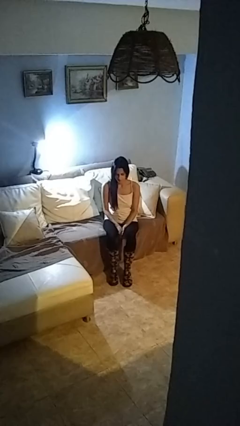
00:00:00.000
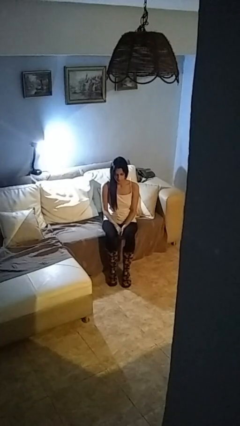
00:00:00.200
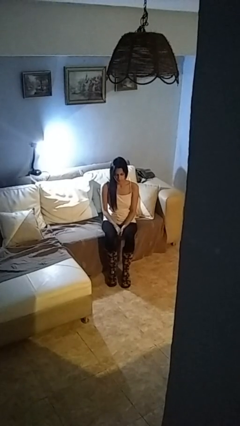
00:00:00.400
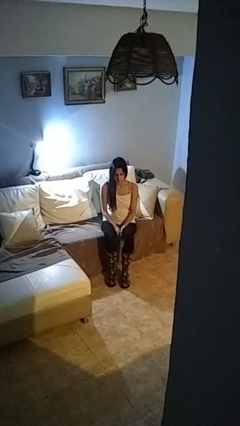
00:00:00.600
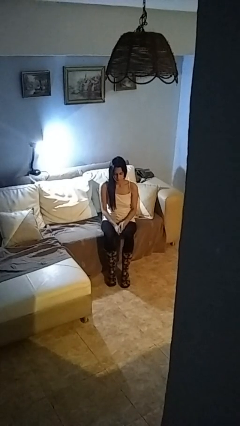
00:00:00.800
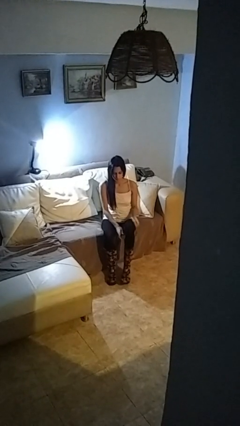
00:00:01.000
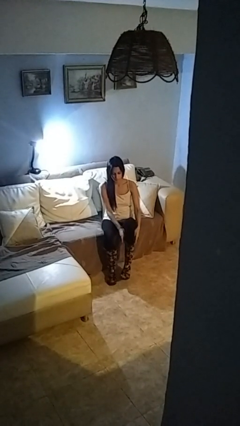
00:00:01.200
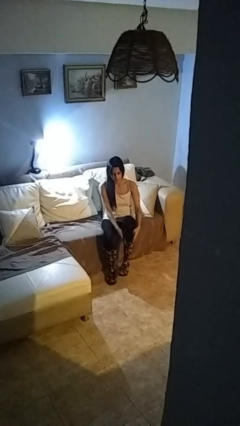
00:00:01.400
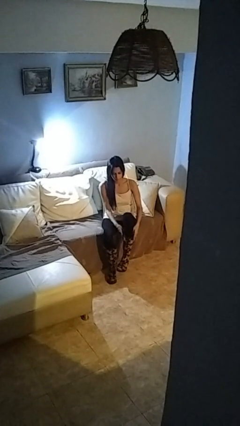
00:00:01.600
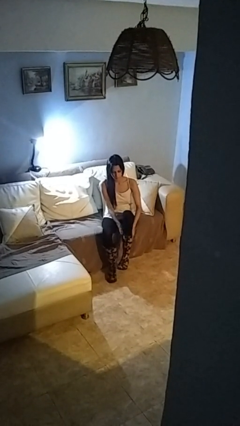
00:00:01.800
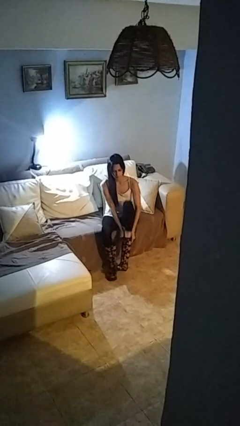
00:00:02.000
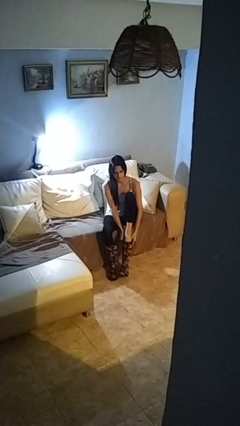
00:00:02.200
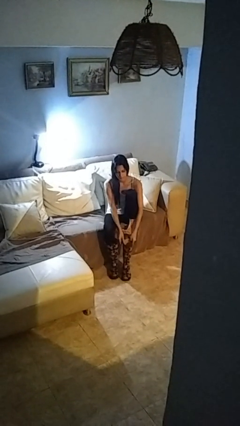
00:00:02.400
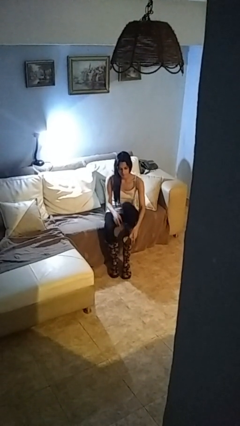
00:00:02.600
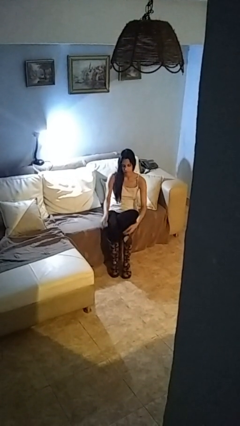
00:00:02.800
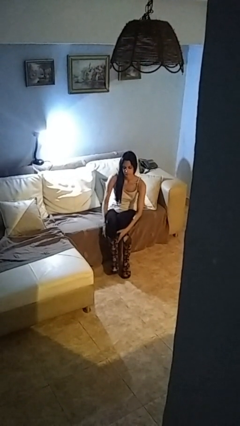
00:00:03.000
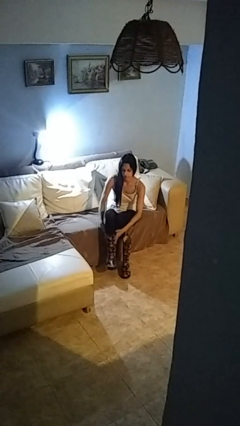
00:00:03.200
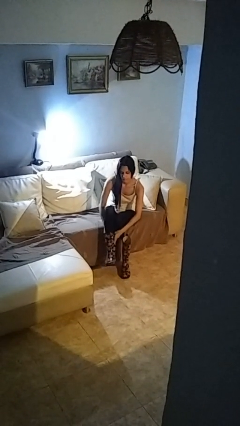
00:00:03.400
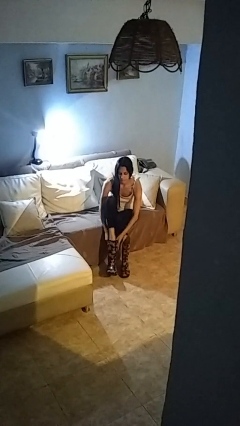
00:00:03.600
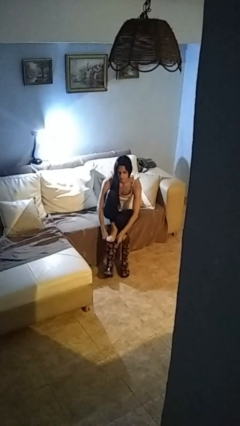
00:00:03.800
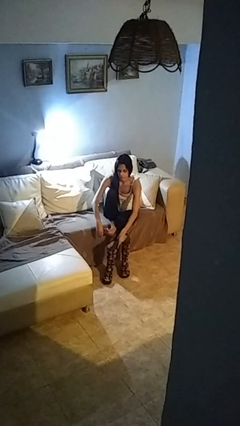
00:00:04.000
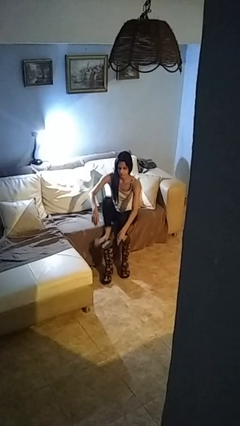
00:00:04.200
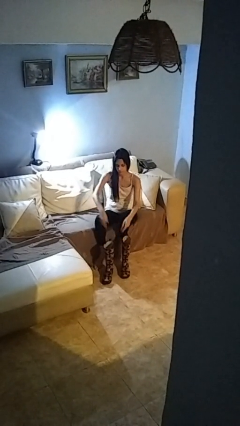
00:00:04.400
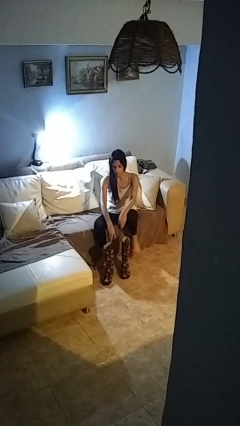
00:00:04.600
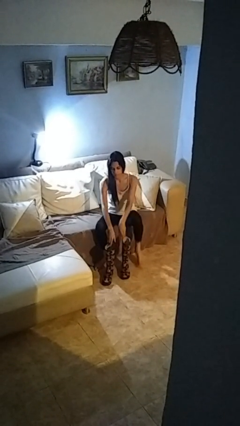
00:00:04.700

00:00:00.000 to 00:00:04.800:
person takes off boots

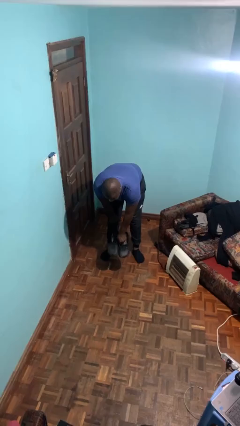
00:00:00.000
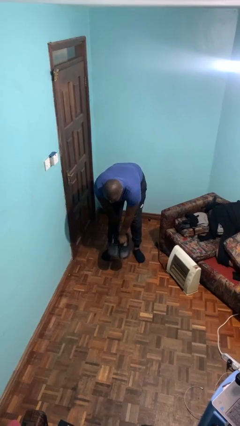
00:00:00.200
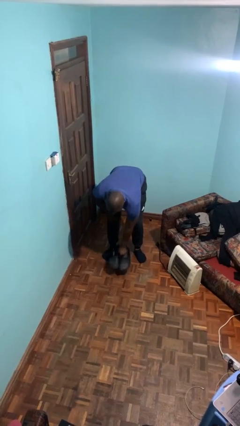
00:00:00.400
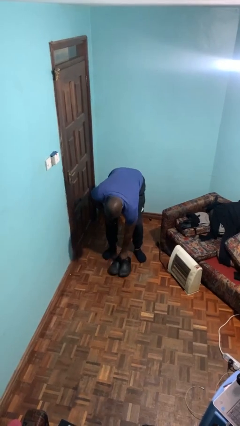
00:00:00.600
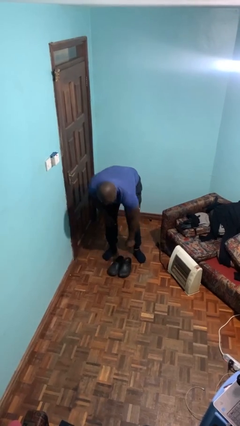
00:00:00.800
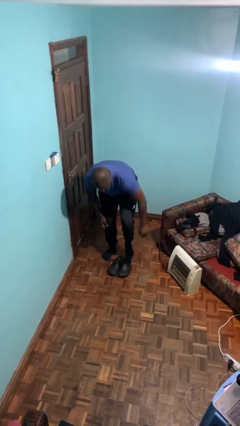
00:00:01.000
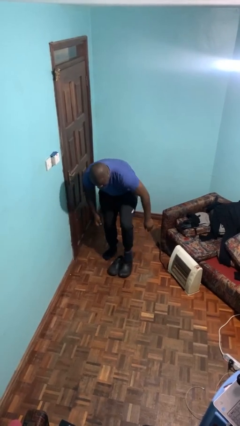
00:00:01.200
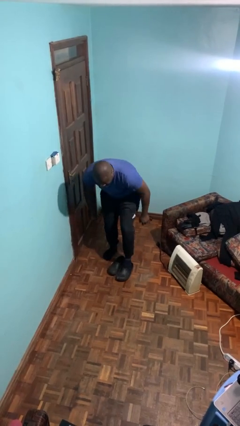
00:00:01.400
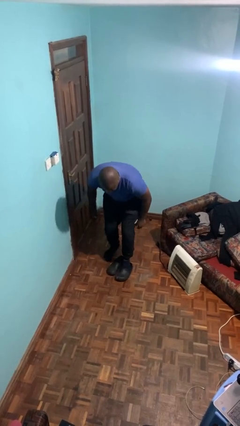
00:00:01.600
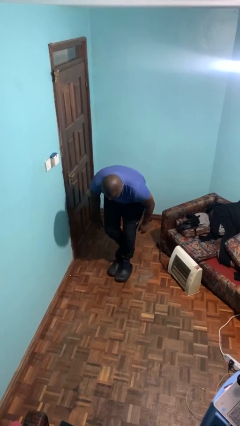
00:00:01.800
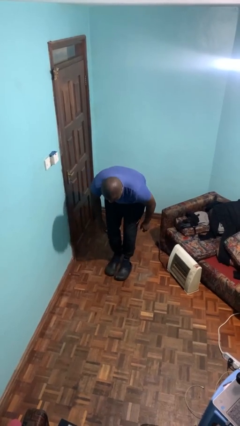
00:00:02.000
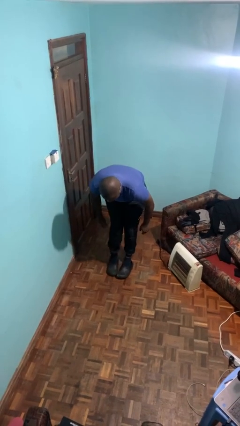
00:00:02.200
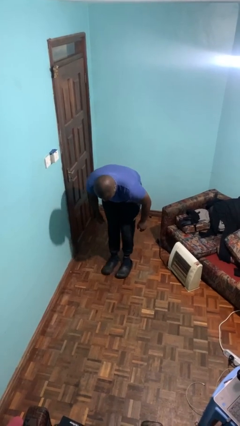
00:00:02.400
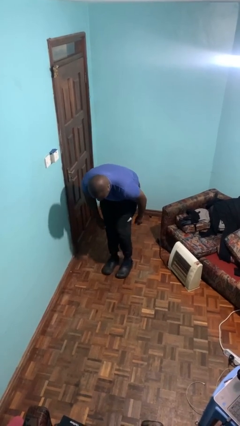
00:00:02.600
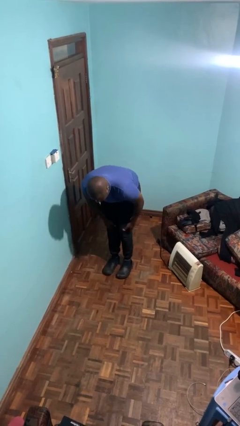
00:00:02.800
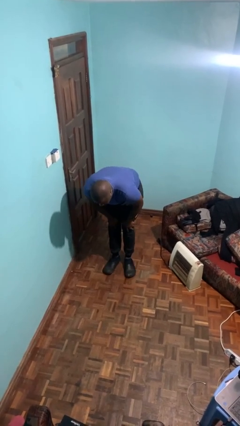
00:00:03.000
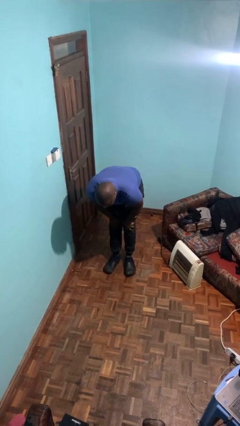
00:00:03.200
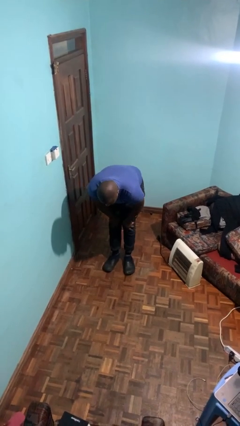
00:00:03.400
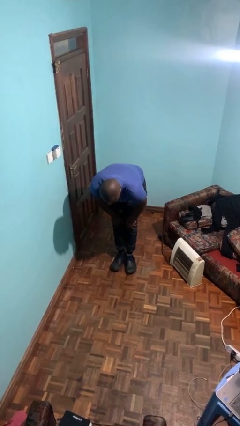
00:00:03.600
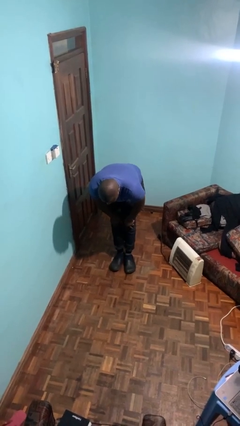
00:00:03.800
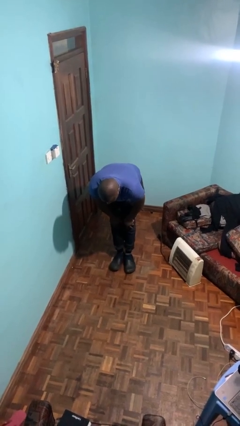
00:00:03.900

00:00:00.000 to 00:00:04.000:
person puts on shoes

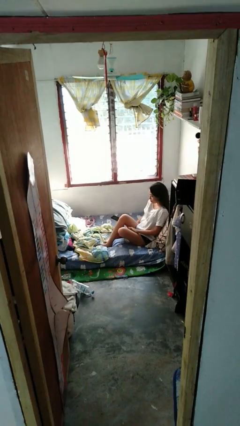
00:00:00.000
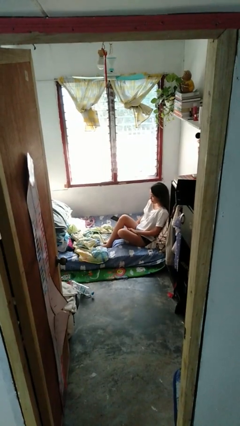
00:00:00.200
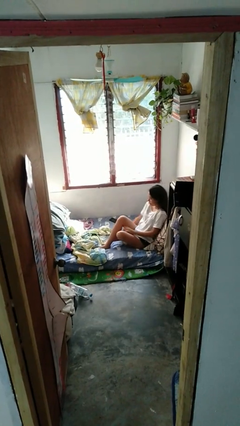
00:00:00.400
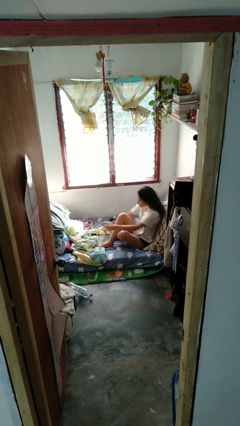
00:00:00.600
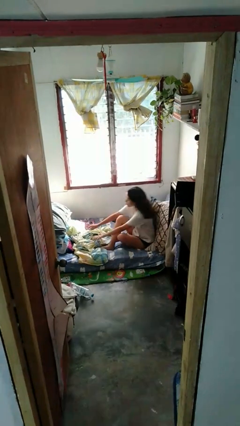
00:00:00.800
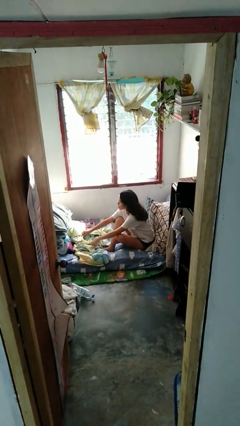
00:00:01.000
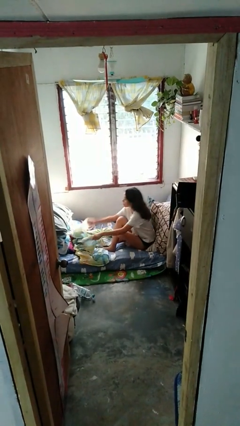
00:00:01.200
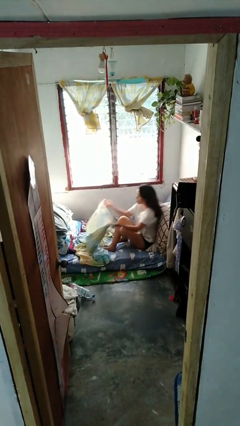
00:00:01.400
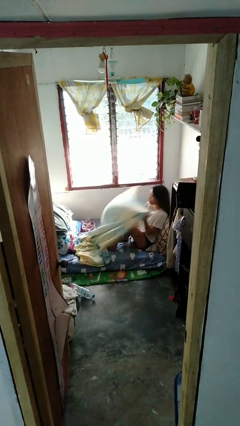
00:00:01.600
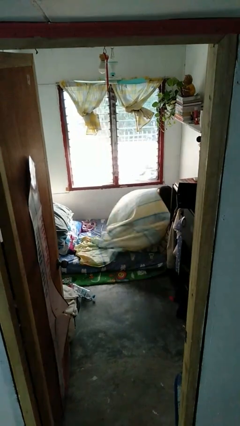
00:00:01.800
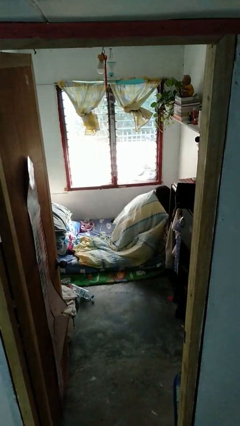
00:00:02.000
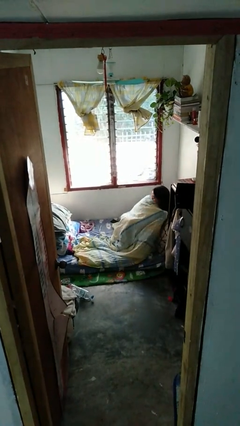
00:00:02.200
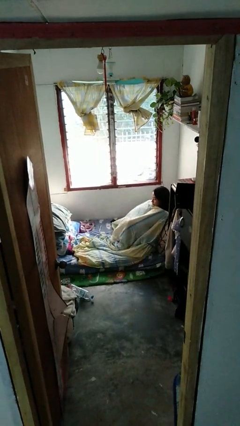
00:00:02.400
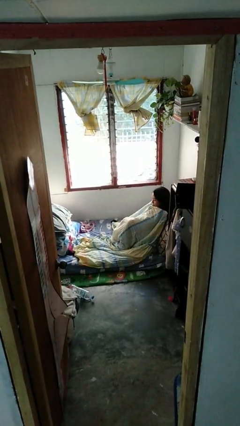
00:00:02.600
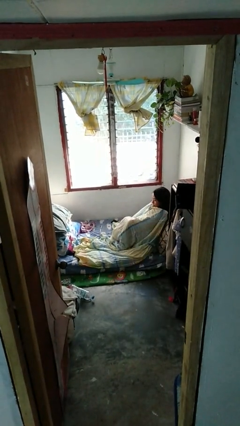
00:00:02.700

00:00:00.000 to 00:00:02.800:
person covers with bedsheets

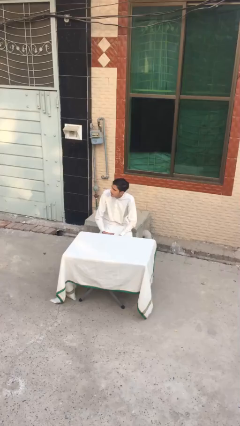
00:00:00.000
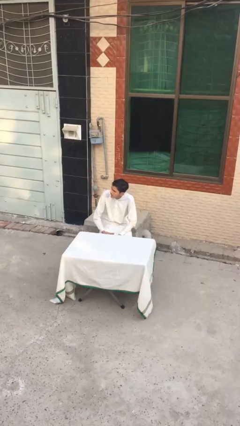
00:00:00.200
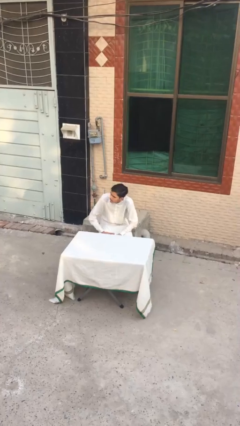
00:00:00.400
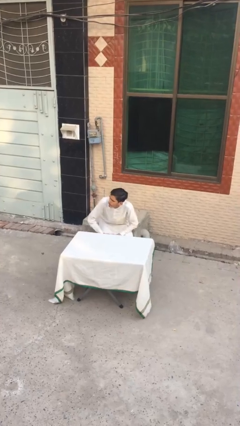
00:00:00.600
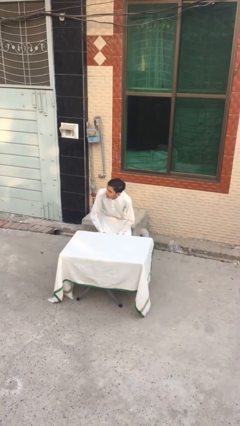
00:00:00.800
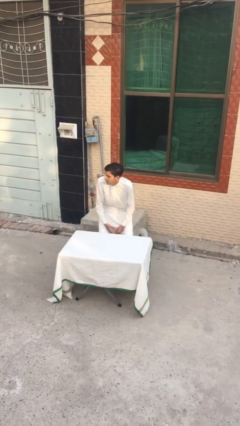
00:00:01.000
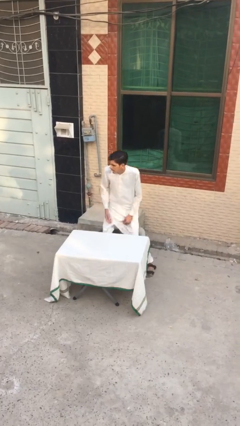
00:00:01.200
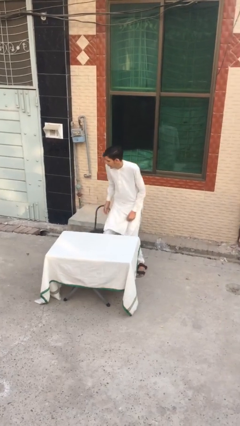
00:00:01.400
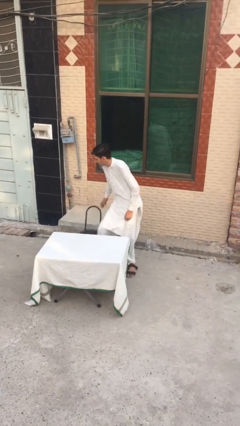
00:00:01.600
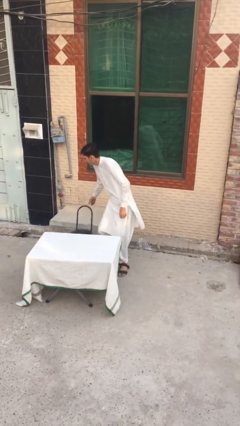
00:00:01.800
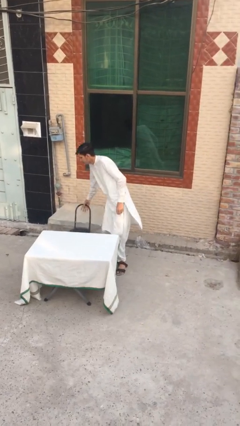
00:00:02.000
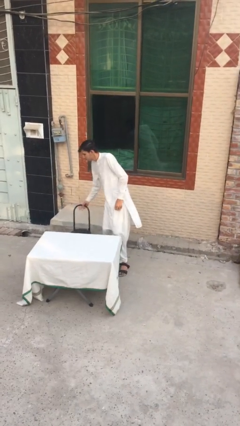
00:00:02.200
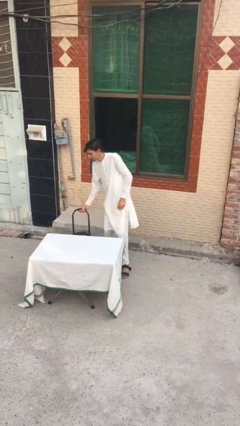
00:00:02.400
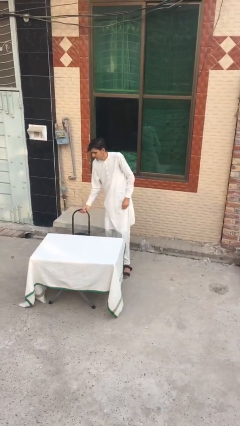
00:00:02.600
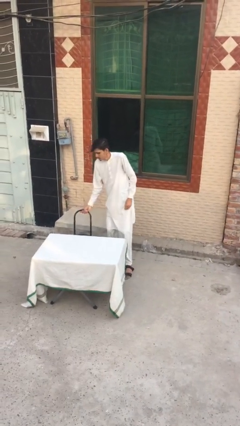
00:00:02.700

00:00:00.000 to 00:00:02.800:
person stands up

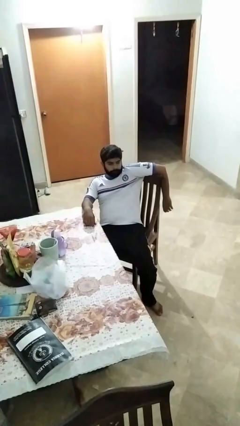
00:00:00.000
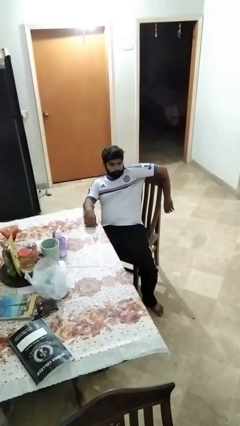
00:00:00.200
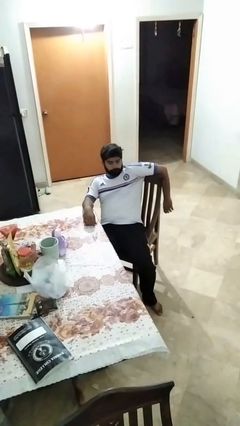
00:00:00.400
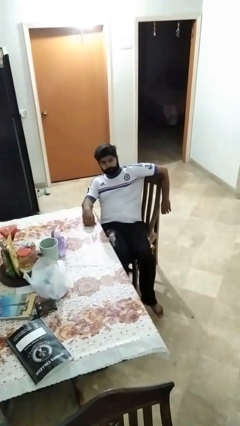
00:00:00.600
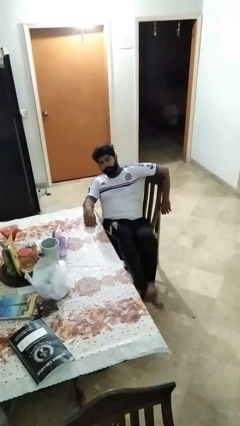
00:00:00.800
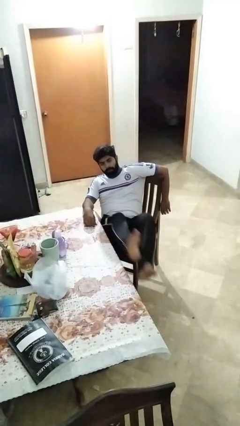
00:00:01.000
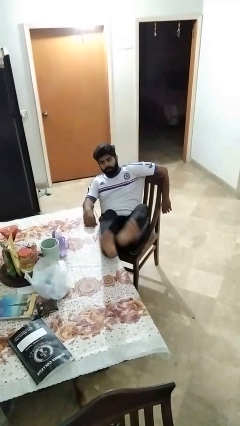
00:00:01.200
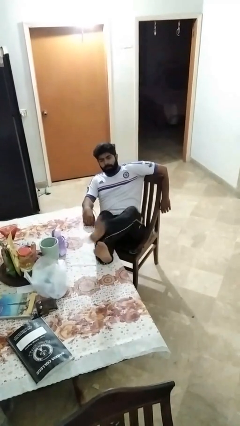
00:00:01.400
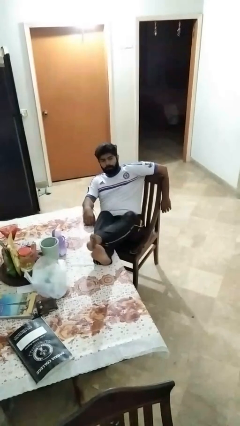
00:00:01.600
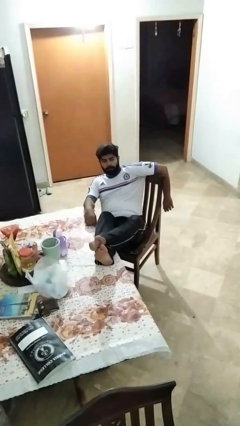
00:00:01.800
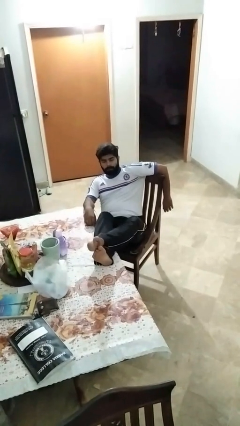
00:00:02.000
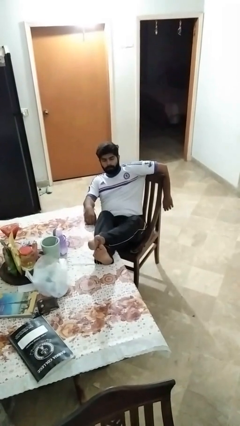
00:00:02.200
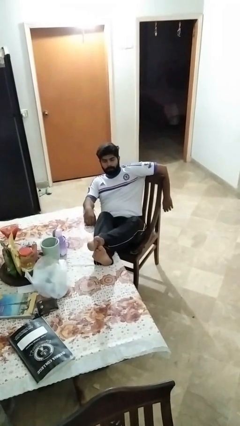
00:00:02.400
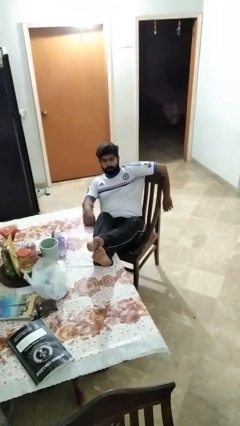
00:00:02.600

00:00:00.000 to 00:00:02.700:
person puts feet up

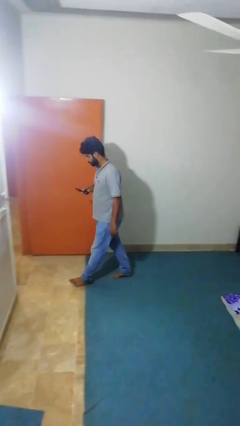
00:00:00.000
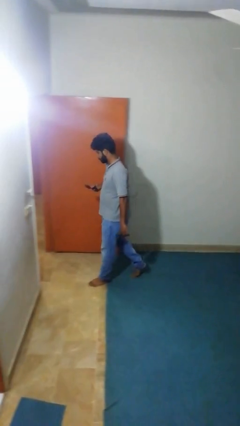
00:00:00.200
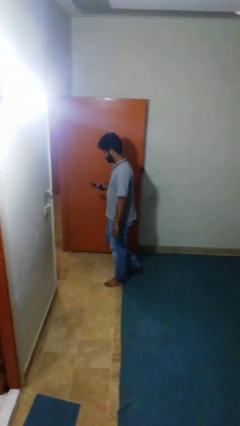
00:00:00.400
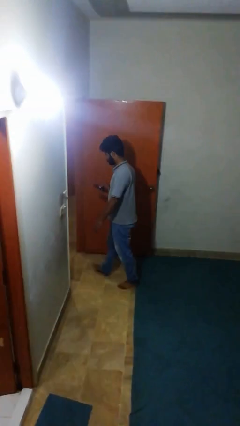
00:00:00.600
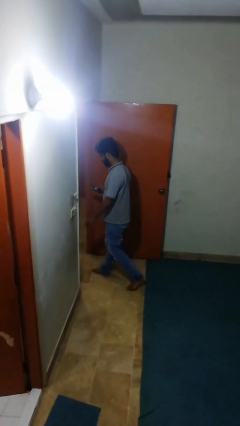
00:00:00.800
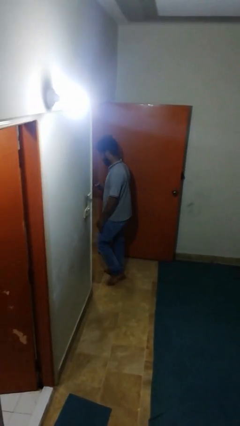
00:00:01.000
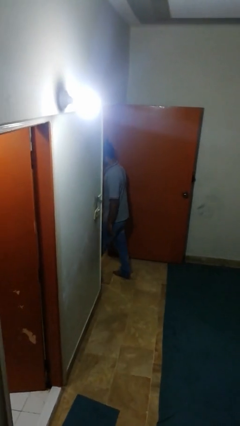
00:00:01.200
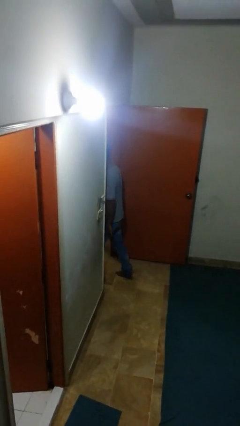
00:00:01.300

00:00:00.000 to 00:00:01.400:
person exits scene through structure
